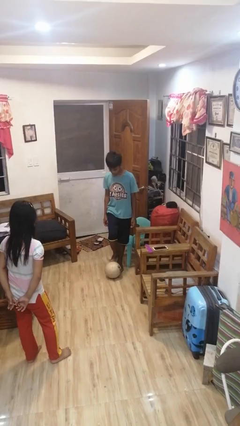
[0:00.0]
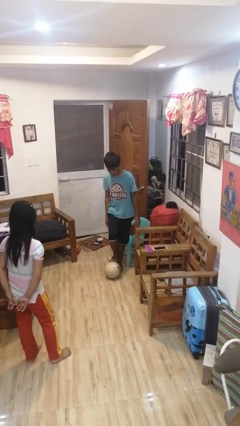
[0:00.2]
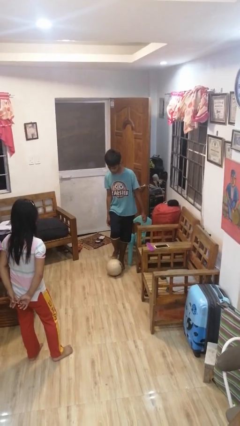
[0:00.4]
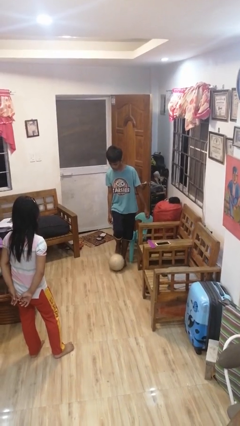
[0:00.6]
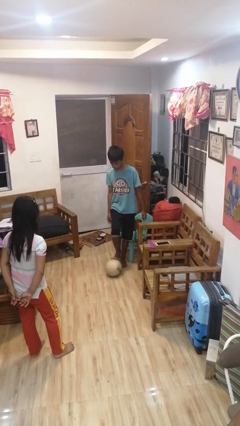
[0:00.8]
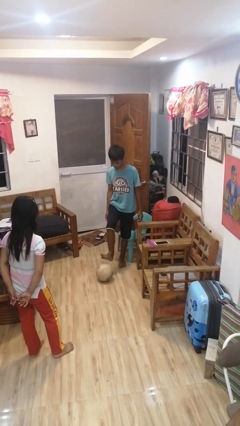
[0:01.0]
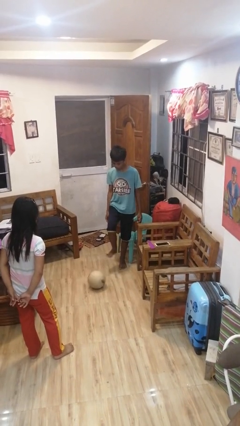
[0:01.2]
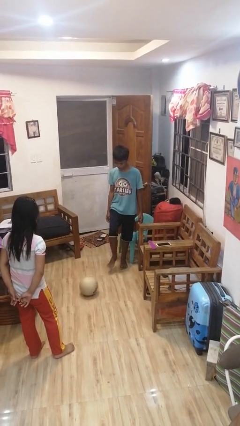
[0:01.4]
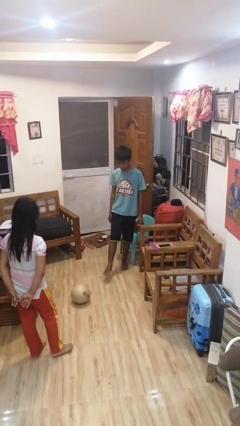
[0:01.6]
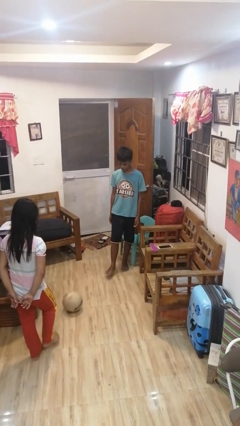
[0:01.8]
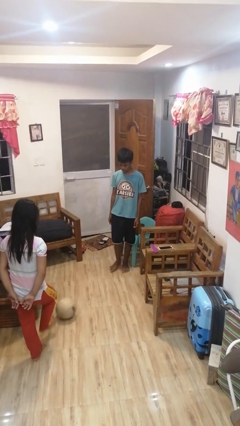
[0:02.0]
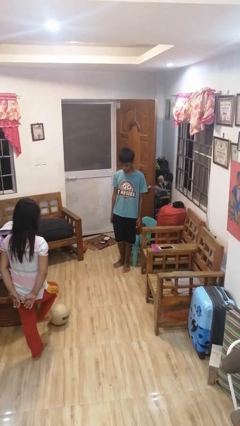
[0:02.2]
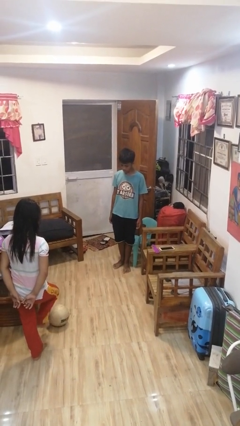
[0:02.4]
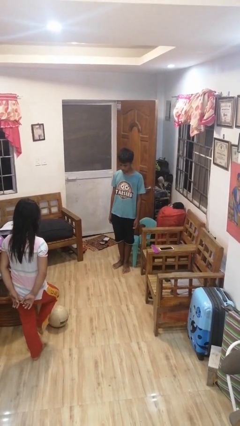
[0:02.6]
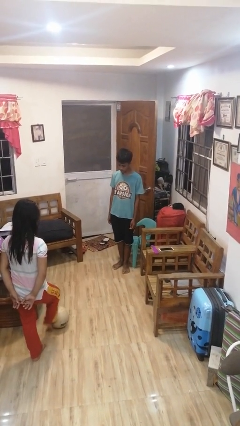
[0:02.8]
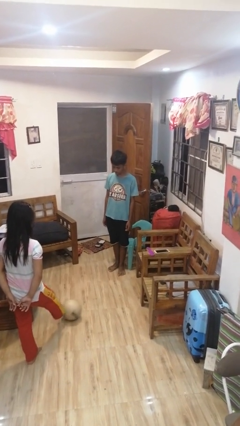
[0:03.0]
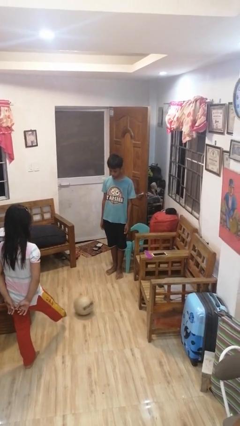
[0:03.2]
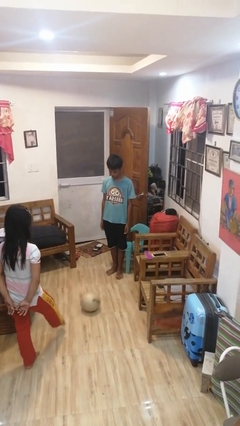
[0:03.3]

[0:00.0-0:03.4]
person kicks object to person

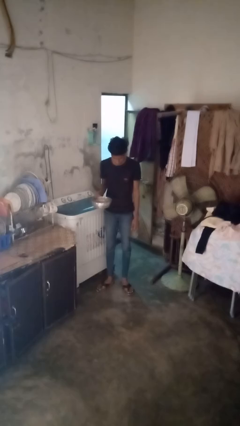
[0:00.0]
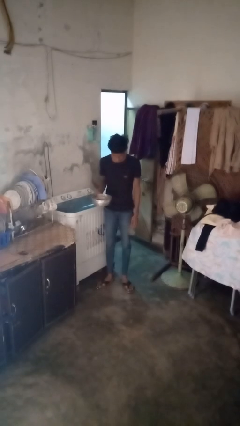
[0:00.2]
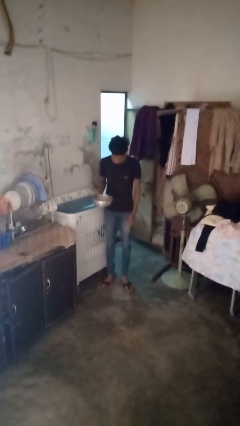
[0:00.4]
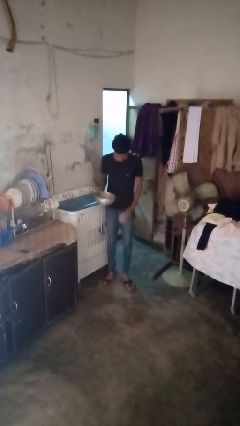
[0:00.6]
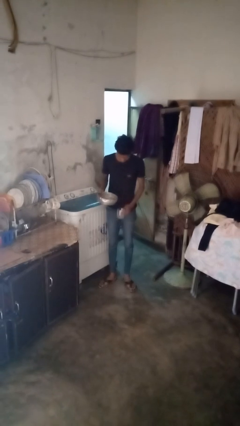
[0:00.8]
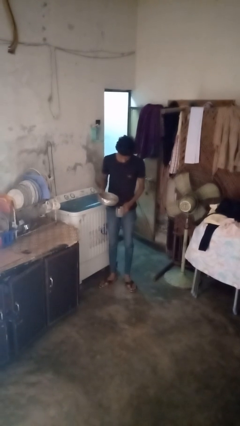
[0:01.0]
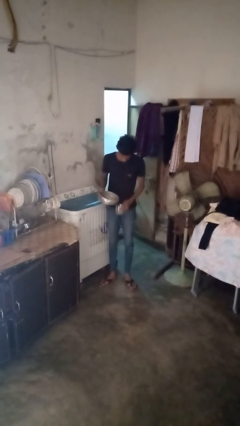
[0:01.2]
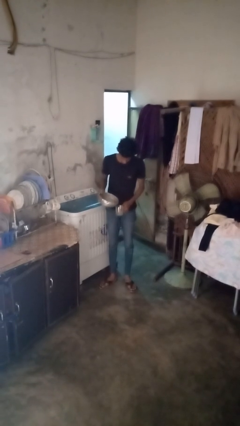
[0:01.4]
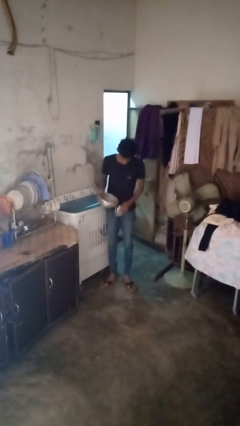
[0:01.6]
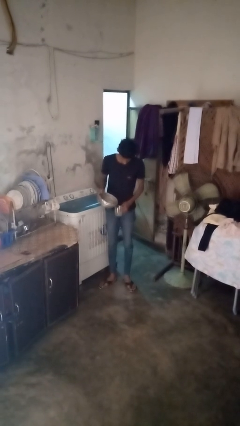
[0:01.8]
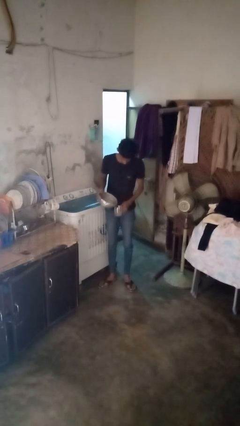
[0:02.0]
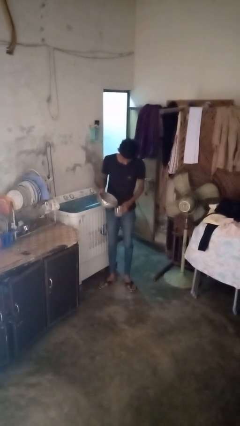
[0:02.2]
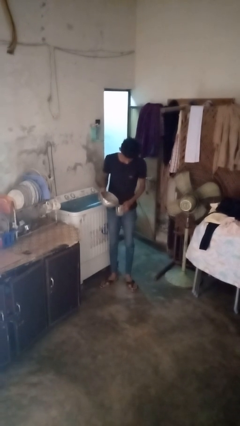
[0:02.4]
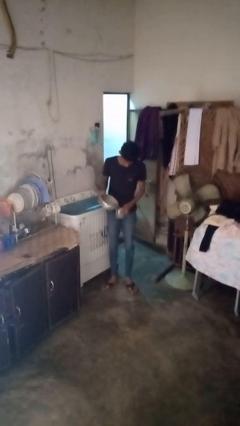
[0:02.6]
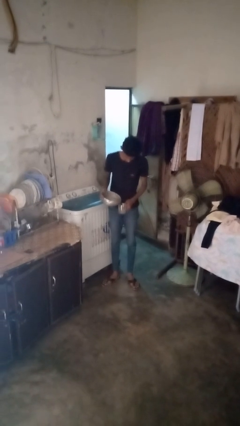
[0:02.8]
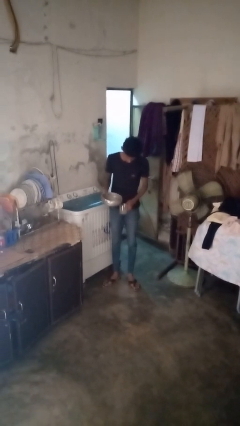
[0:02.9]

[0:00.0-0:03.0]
person pours liquid into cup

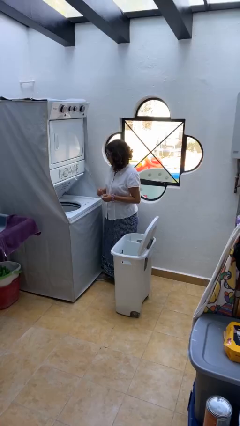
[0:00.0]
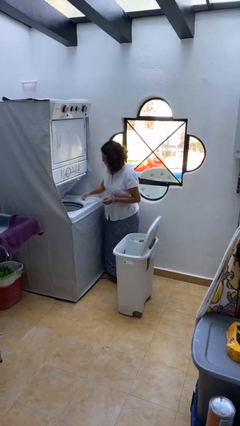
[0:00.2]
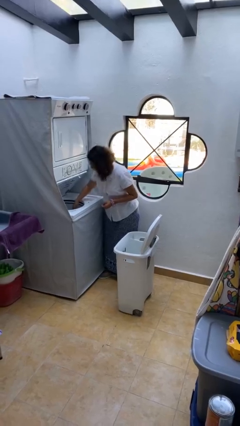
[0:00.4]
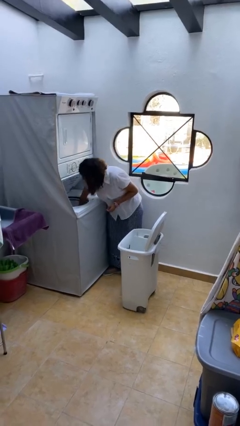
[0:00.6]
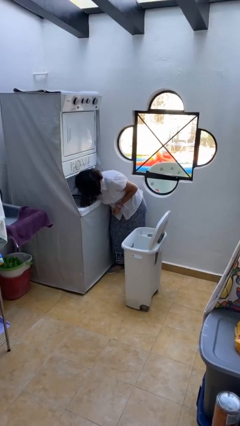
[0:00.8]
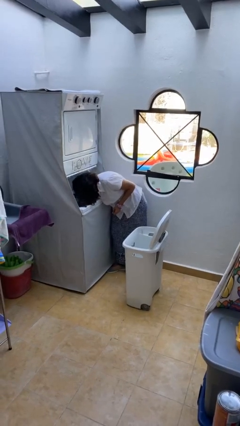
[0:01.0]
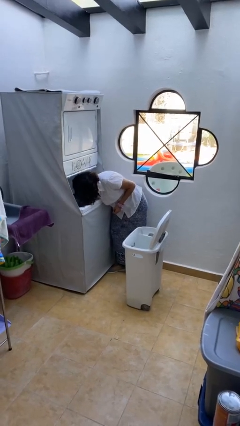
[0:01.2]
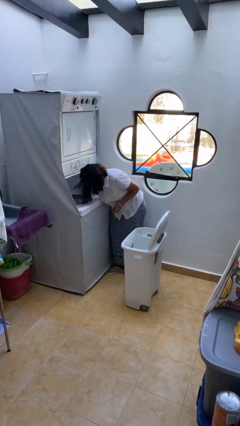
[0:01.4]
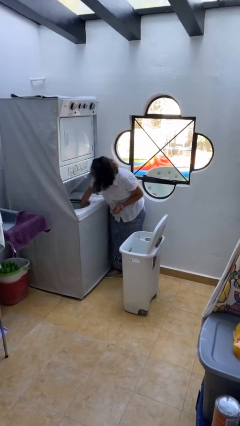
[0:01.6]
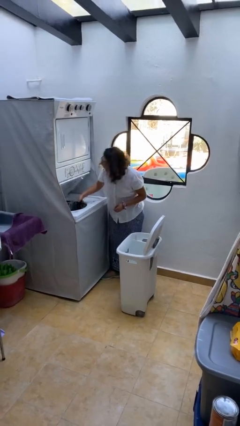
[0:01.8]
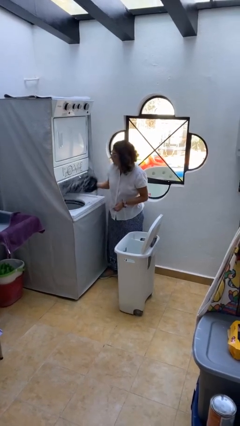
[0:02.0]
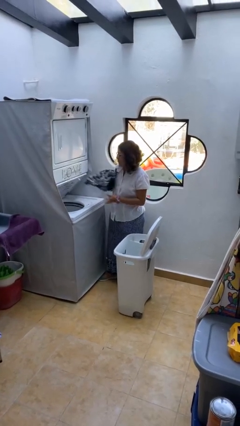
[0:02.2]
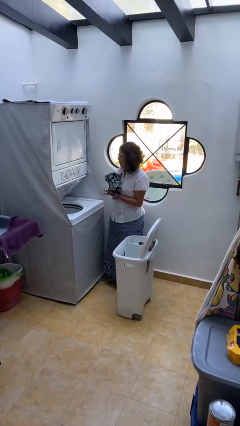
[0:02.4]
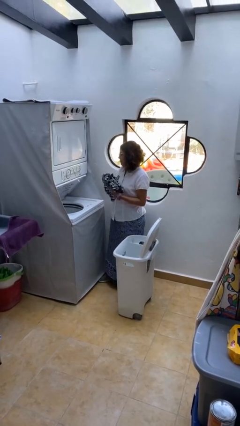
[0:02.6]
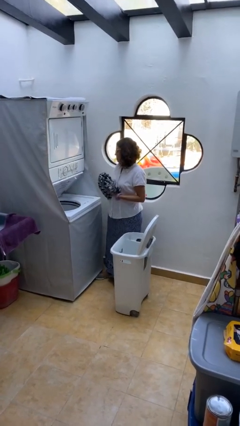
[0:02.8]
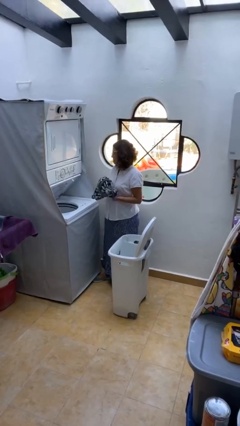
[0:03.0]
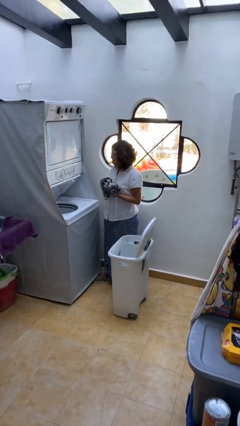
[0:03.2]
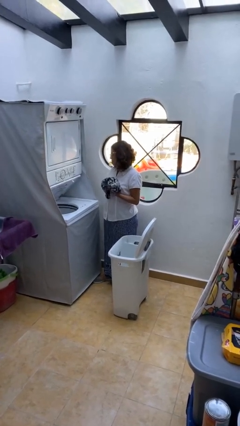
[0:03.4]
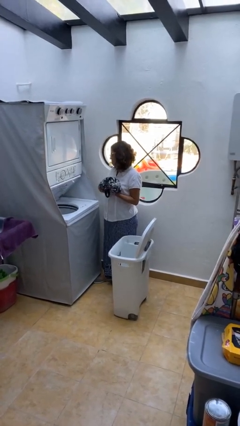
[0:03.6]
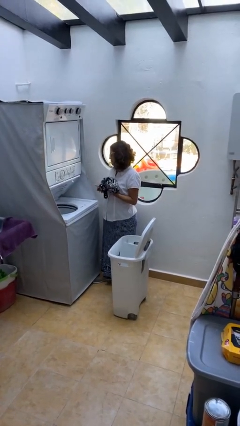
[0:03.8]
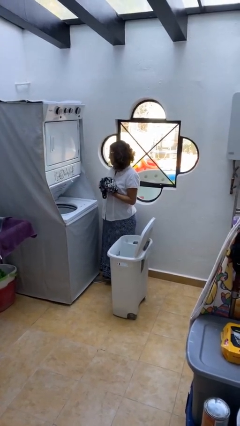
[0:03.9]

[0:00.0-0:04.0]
person loads clotheswasher

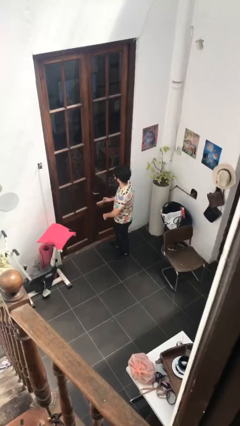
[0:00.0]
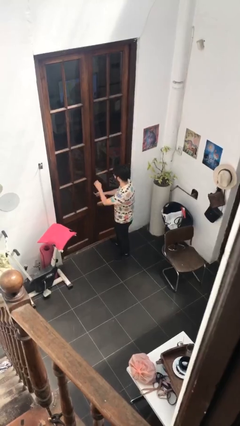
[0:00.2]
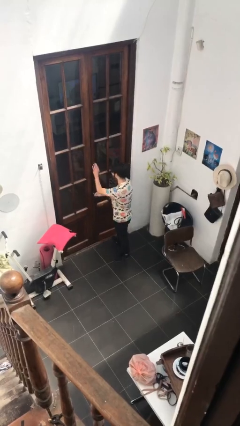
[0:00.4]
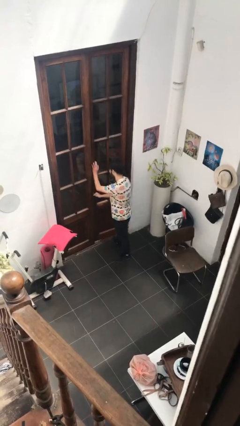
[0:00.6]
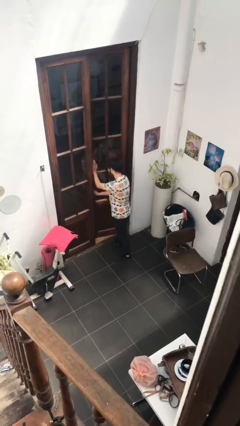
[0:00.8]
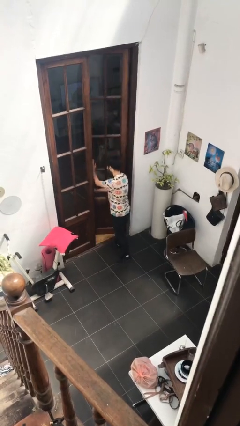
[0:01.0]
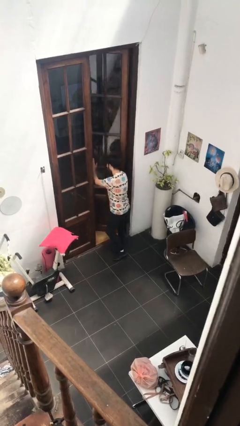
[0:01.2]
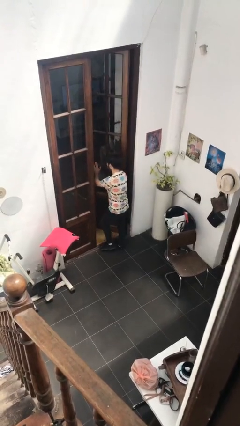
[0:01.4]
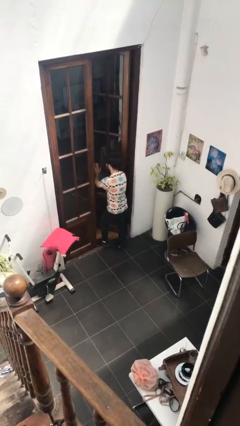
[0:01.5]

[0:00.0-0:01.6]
person opens facility door

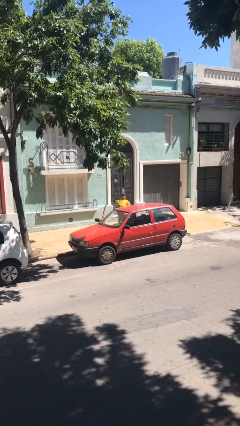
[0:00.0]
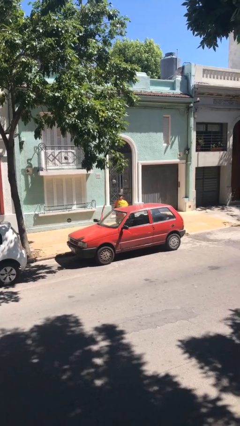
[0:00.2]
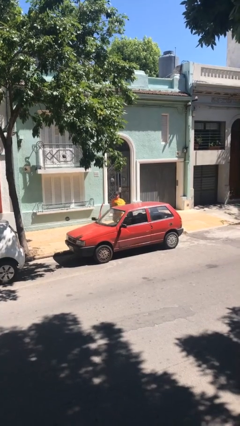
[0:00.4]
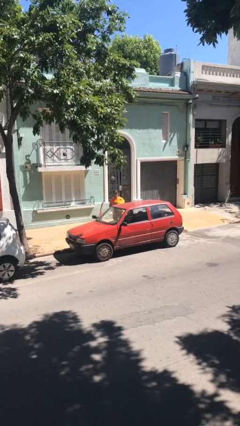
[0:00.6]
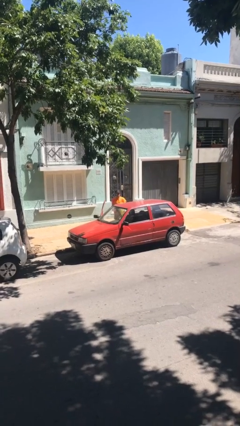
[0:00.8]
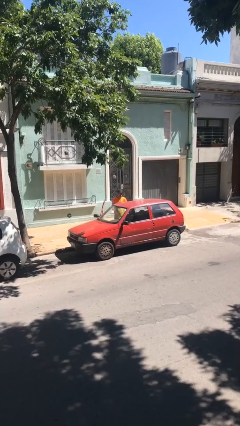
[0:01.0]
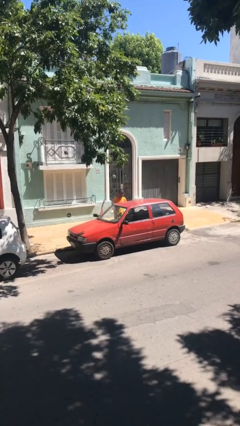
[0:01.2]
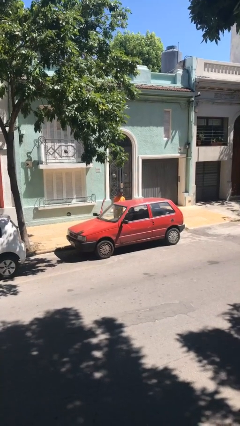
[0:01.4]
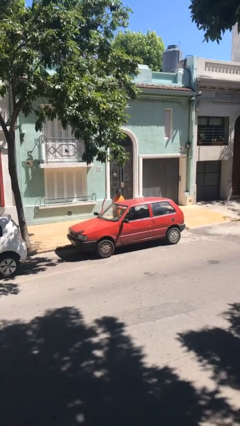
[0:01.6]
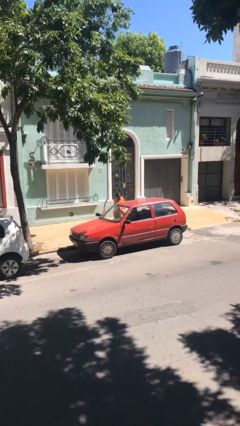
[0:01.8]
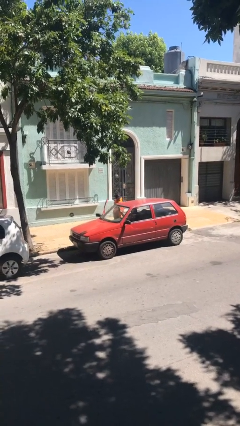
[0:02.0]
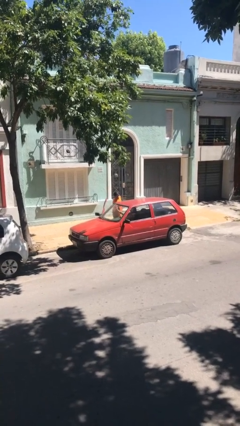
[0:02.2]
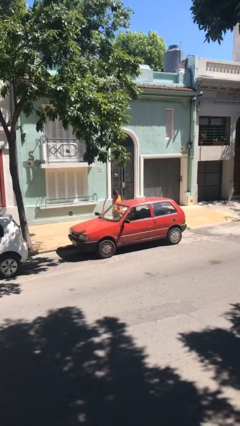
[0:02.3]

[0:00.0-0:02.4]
person loads car

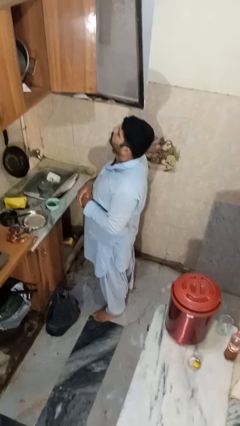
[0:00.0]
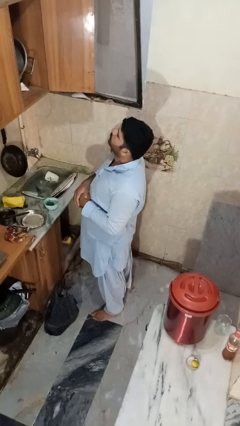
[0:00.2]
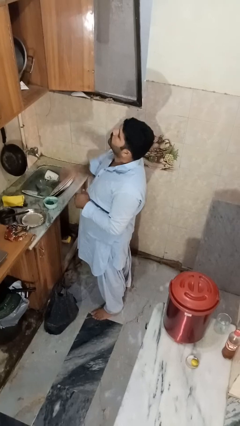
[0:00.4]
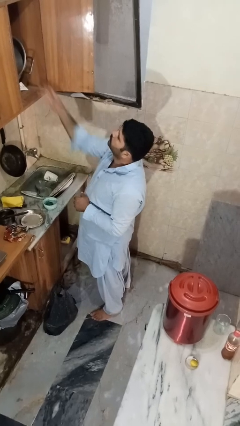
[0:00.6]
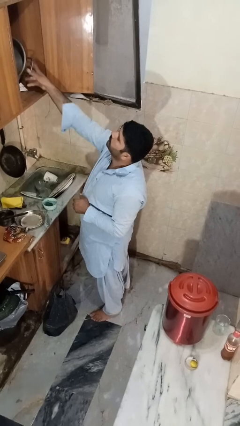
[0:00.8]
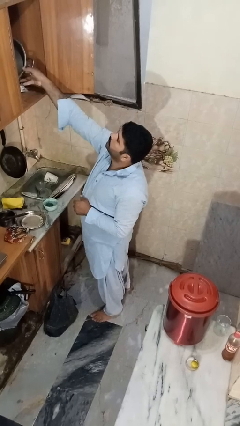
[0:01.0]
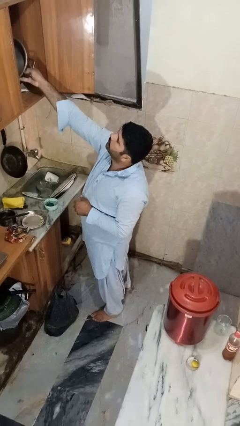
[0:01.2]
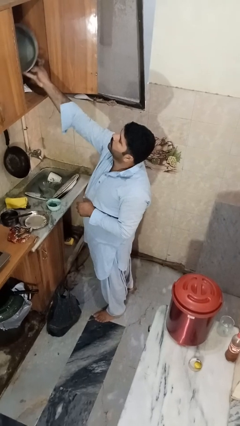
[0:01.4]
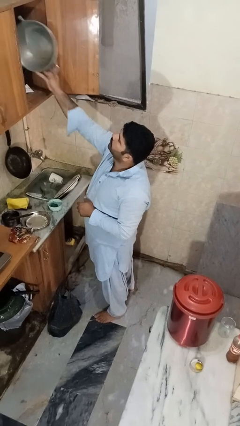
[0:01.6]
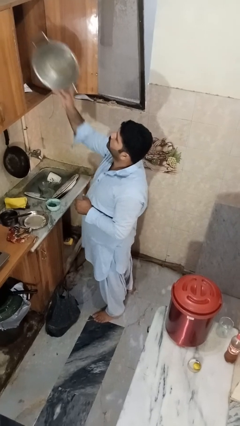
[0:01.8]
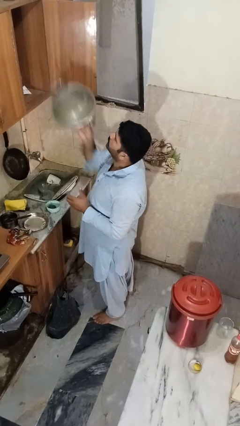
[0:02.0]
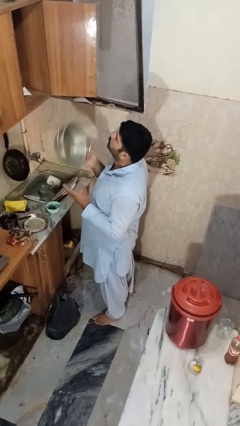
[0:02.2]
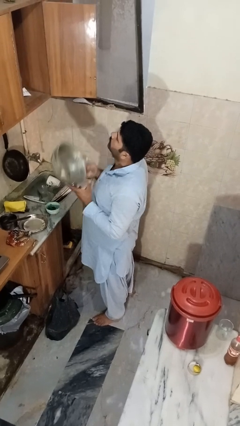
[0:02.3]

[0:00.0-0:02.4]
person takes object from cabinet

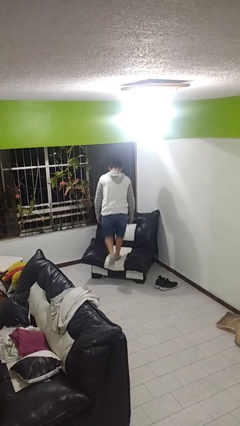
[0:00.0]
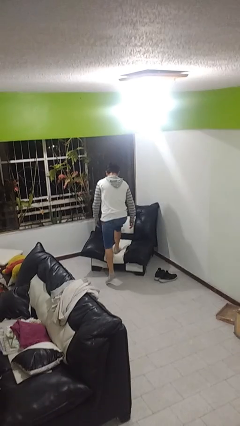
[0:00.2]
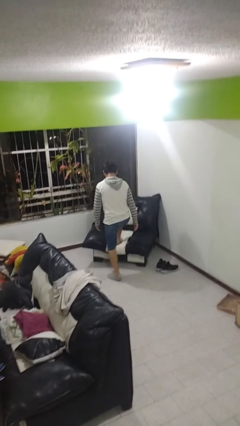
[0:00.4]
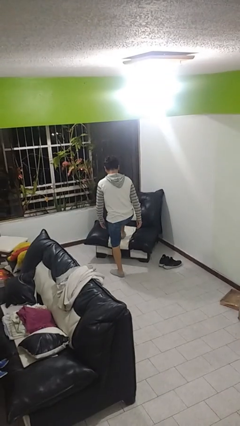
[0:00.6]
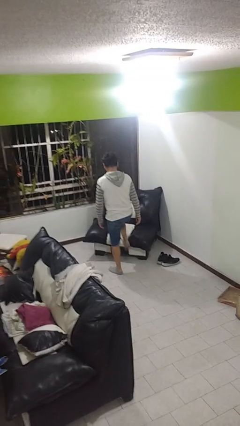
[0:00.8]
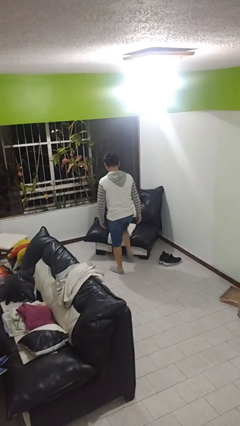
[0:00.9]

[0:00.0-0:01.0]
person climbs off couch
